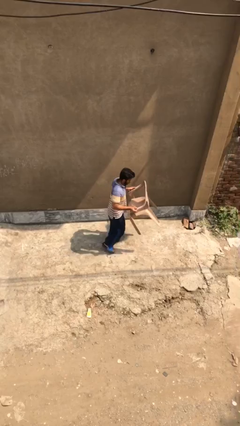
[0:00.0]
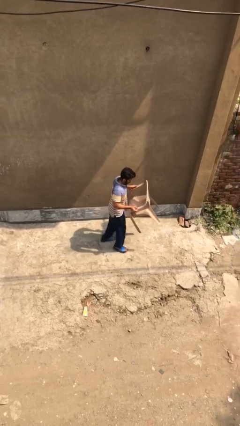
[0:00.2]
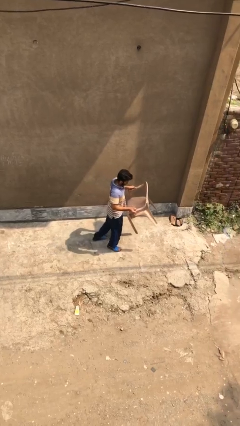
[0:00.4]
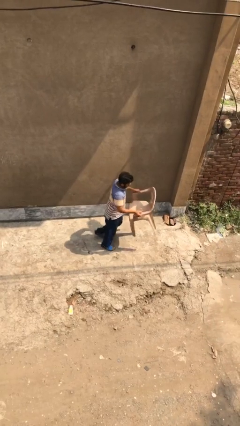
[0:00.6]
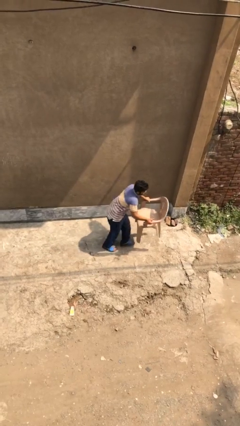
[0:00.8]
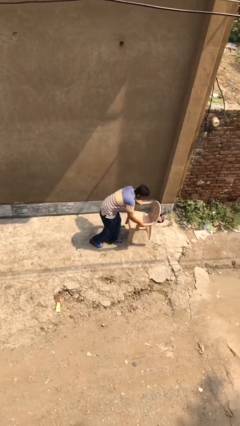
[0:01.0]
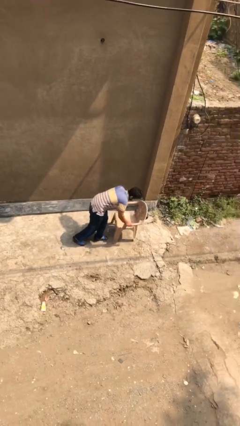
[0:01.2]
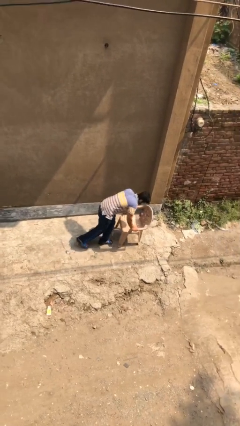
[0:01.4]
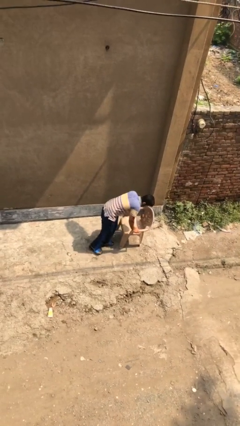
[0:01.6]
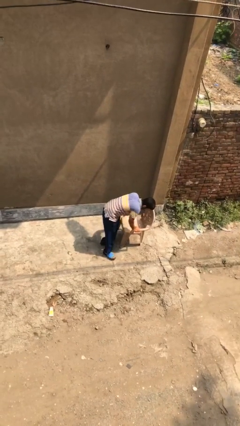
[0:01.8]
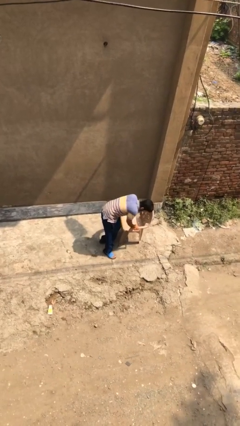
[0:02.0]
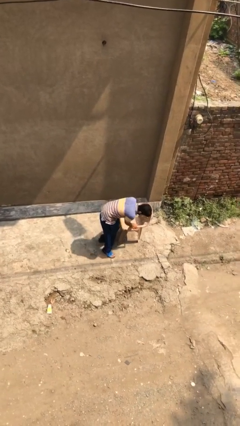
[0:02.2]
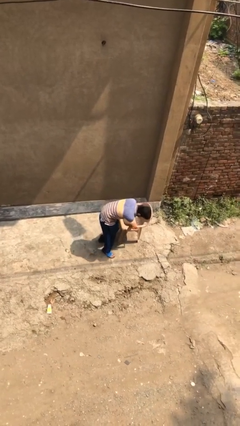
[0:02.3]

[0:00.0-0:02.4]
person puts down object on floor

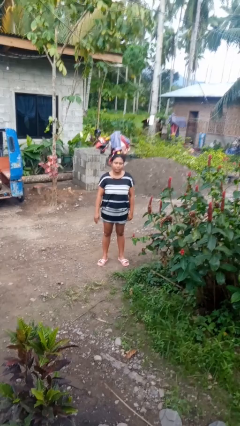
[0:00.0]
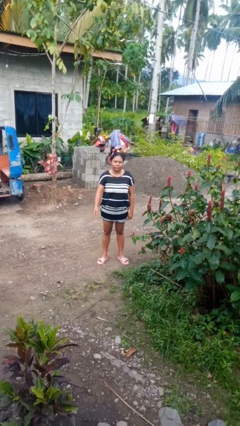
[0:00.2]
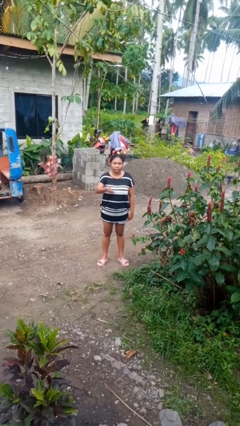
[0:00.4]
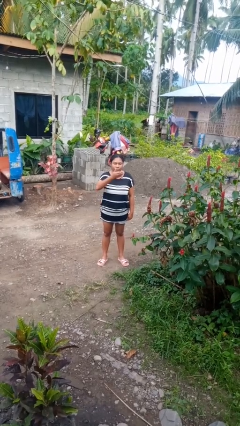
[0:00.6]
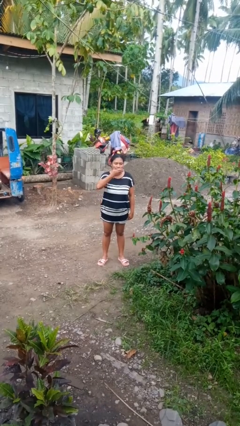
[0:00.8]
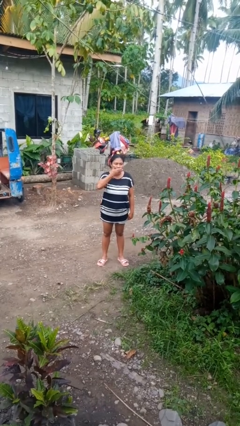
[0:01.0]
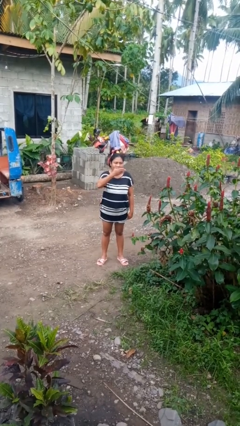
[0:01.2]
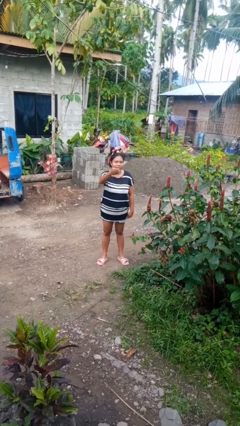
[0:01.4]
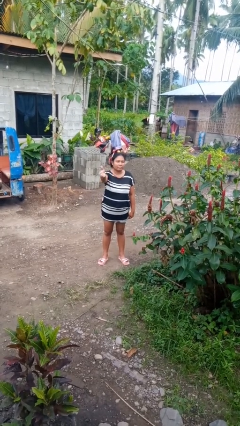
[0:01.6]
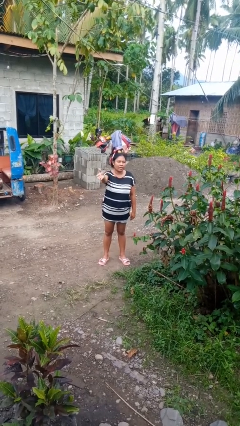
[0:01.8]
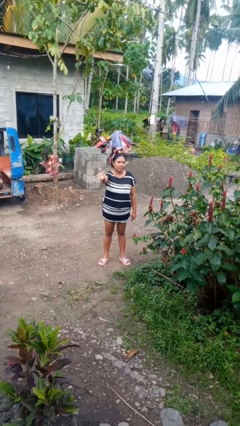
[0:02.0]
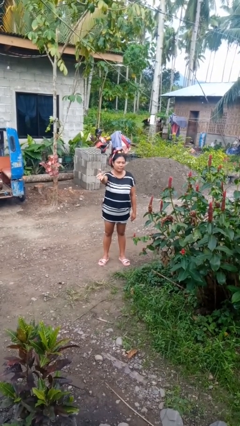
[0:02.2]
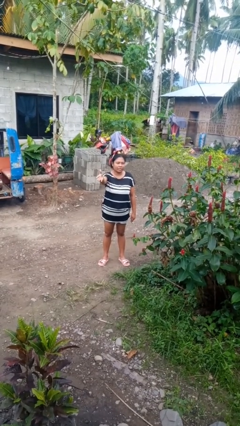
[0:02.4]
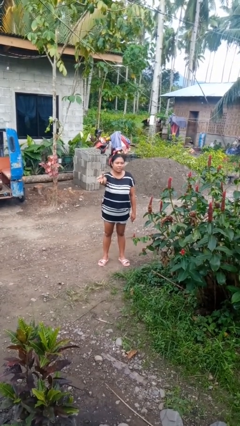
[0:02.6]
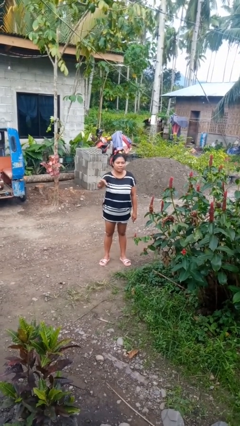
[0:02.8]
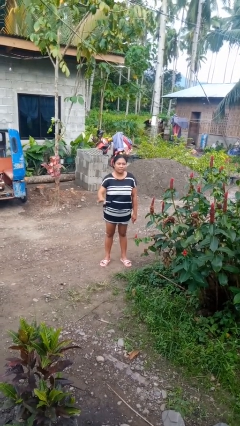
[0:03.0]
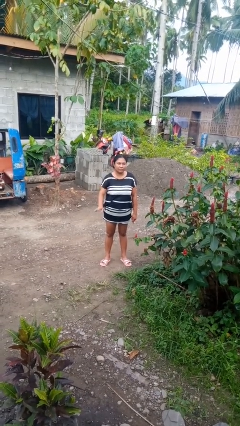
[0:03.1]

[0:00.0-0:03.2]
person gestures blow kiss

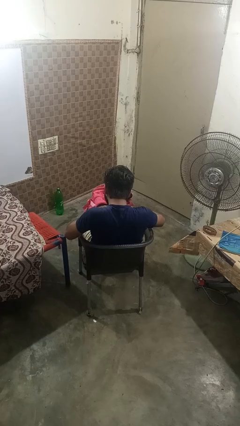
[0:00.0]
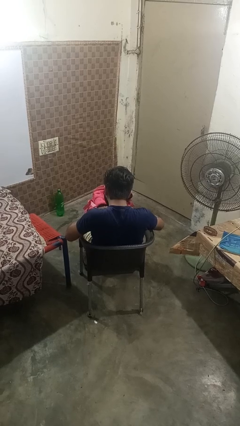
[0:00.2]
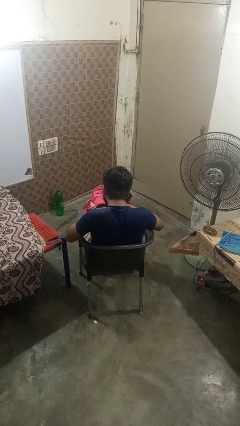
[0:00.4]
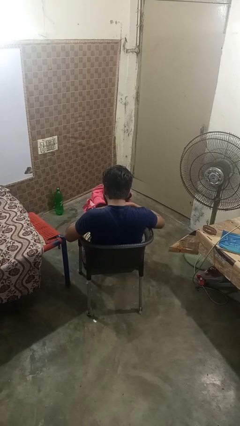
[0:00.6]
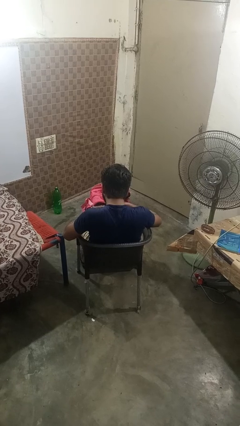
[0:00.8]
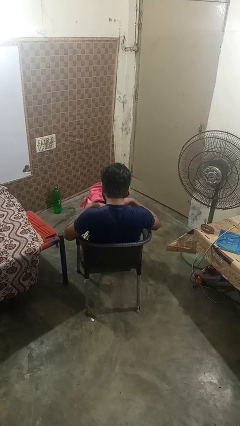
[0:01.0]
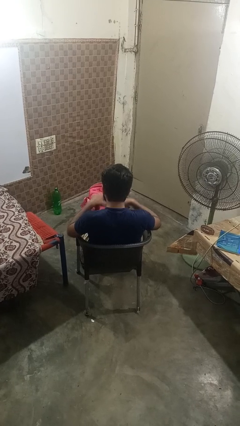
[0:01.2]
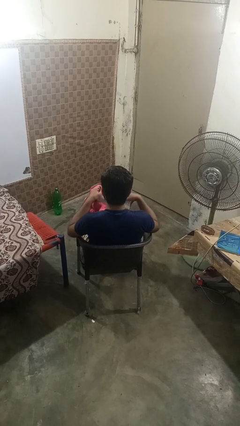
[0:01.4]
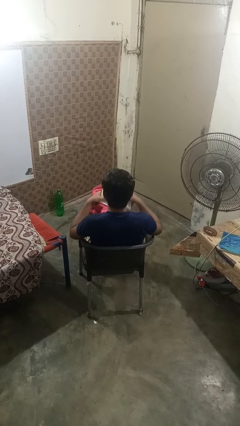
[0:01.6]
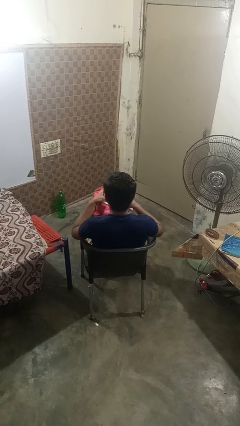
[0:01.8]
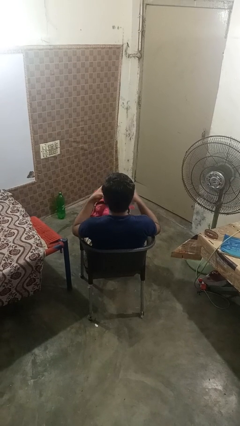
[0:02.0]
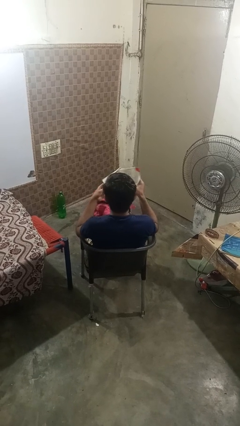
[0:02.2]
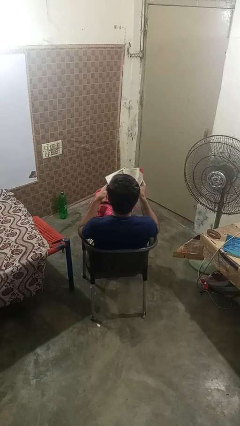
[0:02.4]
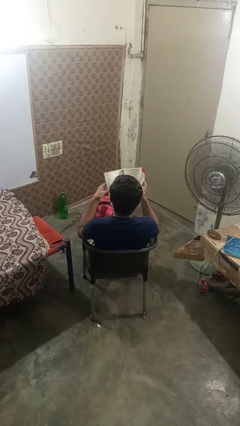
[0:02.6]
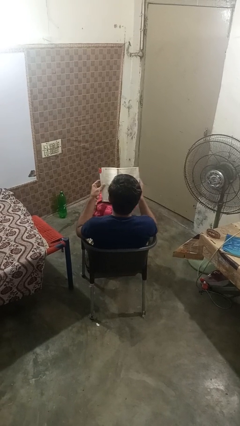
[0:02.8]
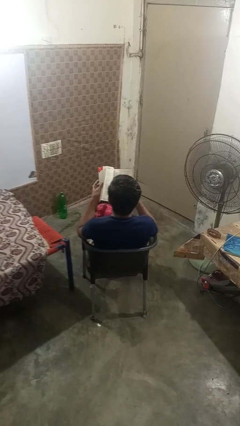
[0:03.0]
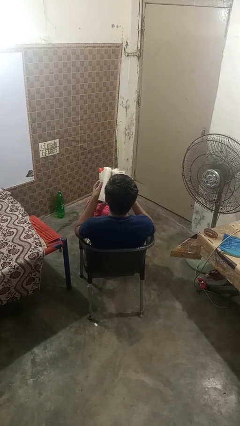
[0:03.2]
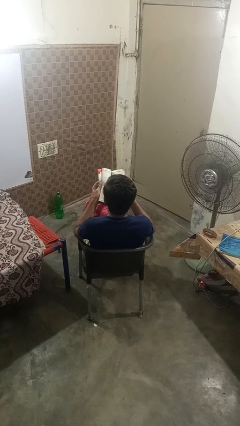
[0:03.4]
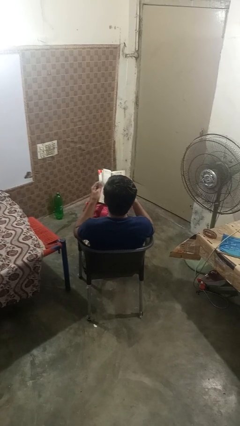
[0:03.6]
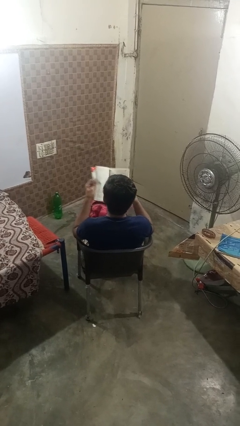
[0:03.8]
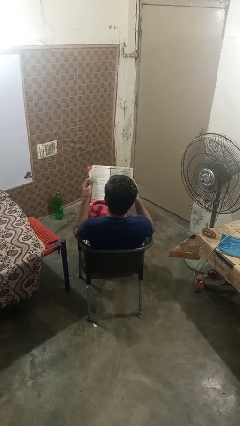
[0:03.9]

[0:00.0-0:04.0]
person takes object from backpack

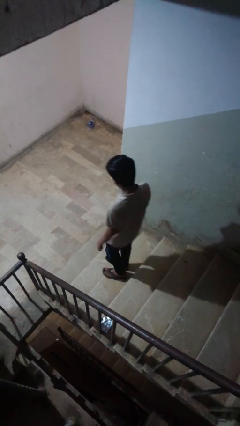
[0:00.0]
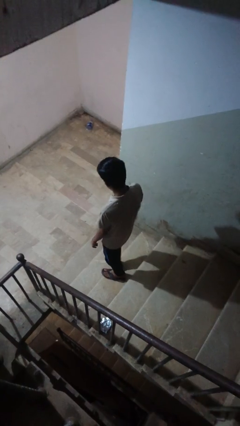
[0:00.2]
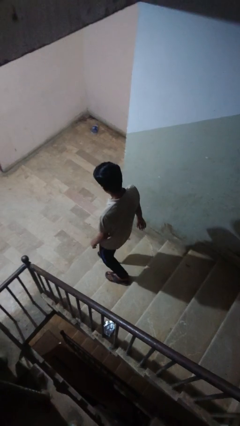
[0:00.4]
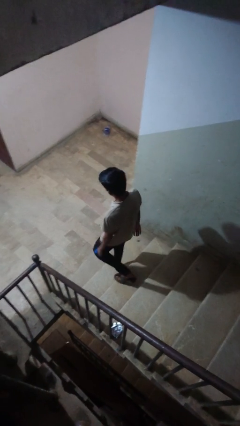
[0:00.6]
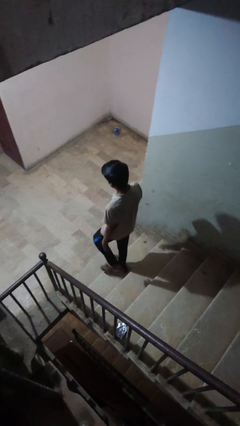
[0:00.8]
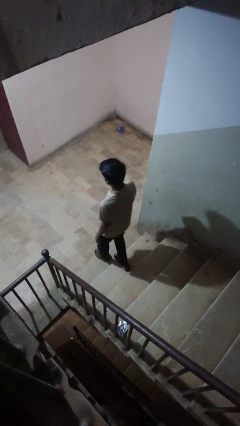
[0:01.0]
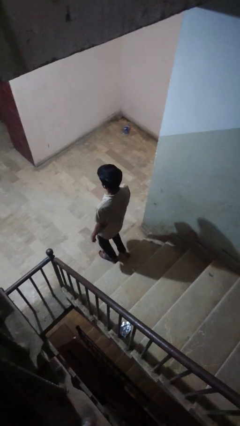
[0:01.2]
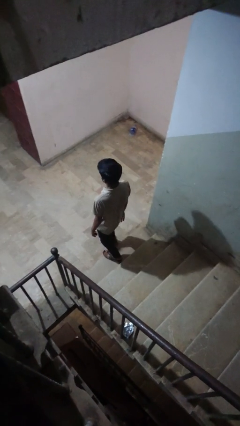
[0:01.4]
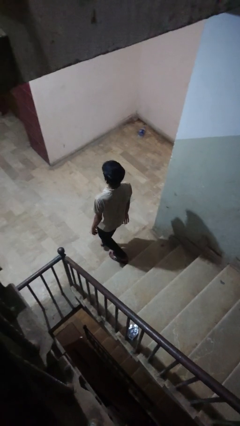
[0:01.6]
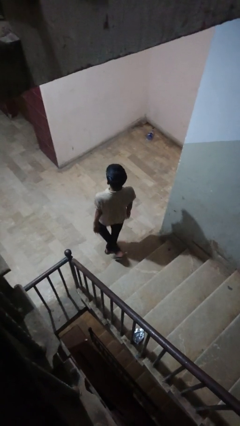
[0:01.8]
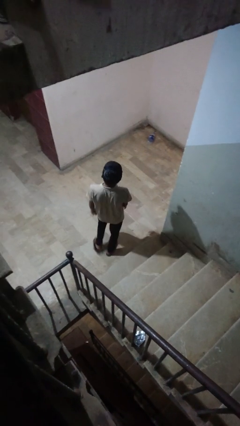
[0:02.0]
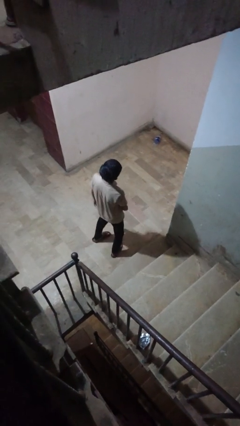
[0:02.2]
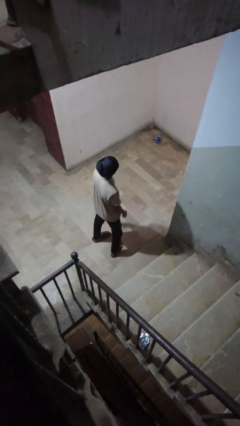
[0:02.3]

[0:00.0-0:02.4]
person climbs down stairs

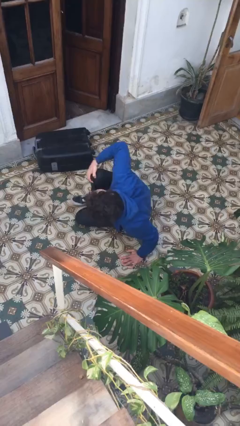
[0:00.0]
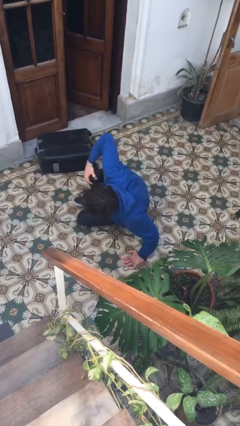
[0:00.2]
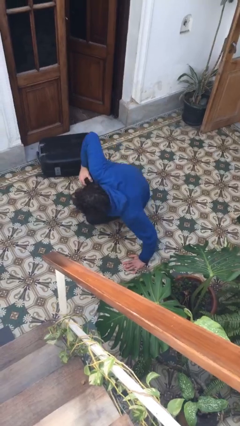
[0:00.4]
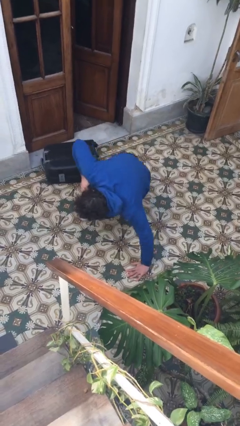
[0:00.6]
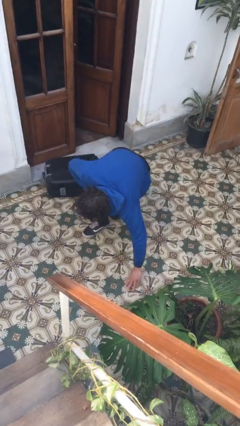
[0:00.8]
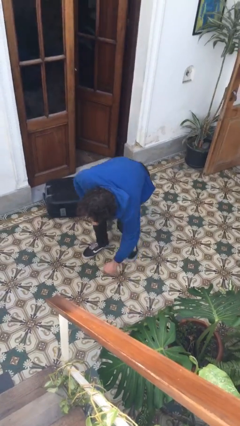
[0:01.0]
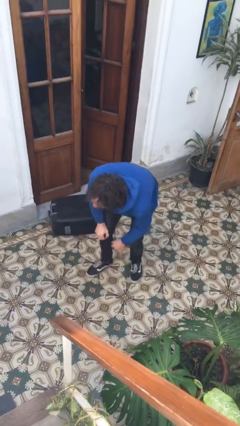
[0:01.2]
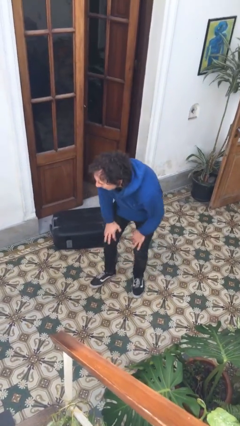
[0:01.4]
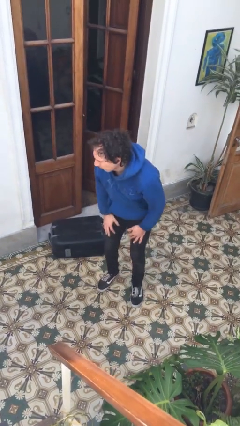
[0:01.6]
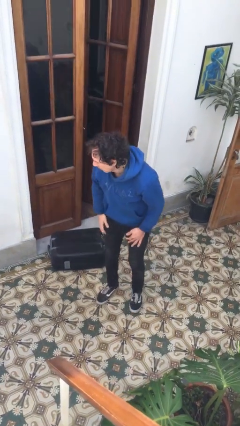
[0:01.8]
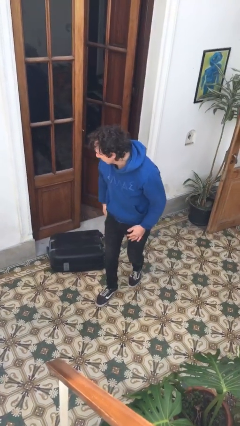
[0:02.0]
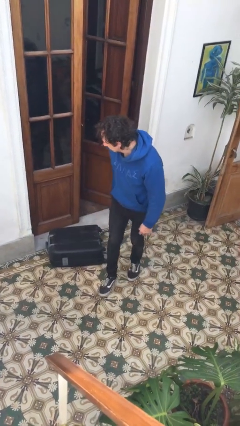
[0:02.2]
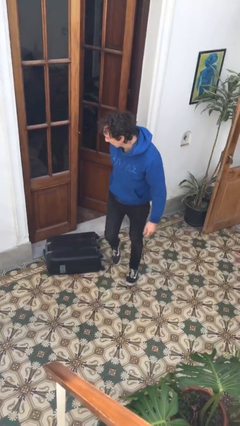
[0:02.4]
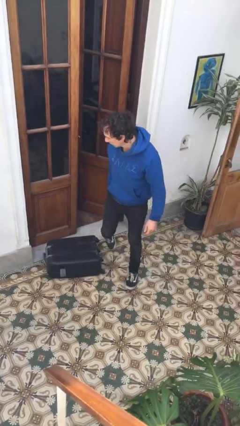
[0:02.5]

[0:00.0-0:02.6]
person stands up from floor

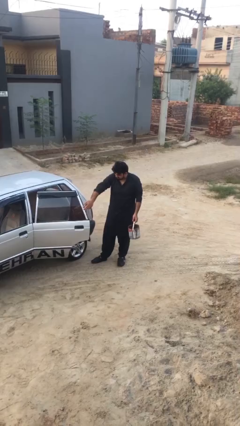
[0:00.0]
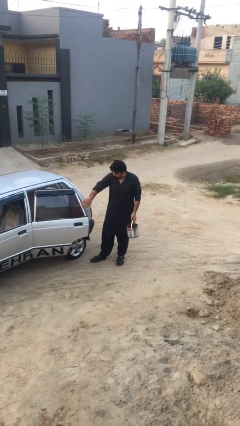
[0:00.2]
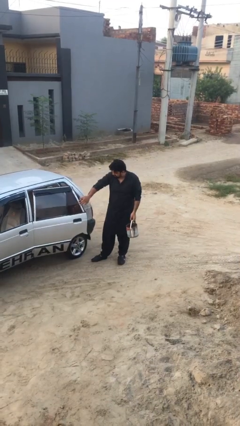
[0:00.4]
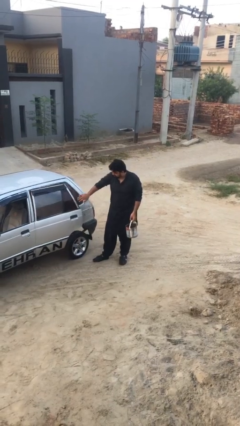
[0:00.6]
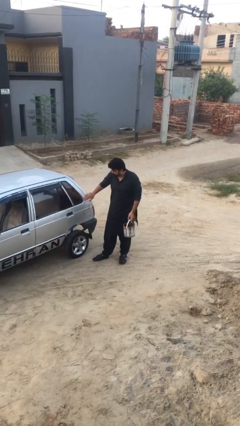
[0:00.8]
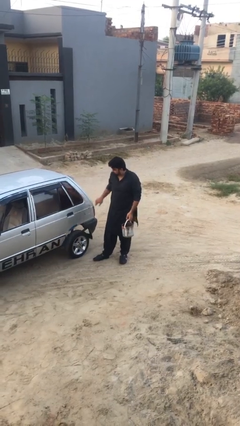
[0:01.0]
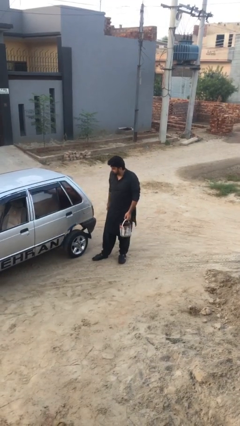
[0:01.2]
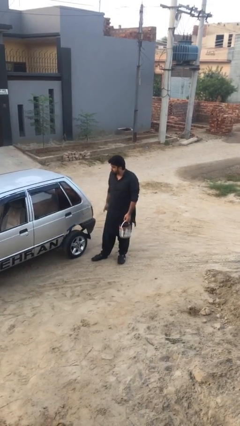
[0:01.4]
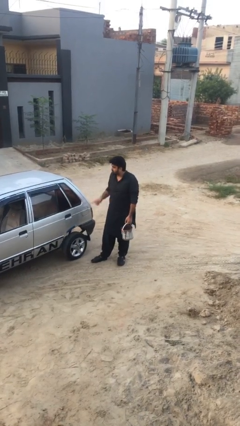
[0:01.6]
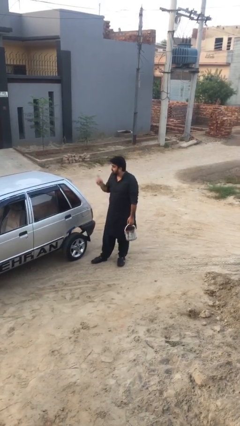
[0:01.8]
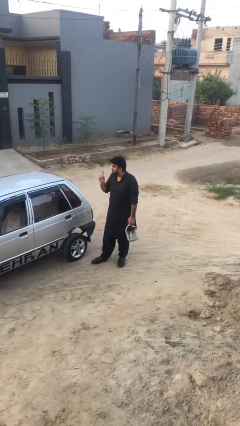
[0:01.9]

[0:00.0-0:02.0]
person closes car door

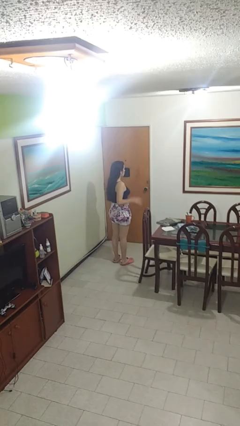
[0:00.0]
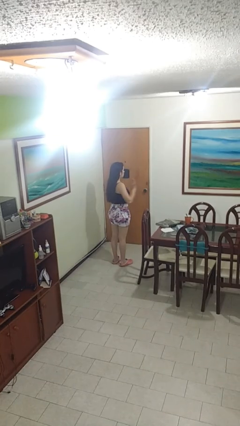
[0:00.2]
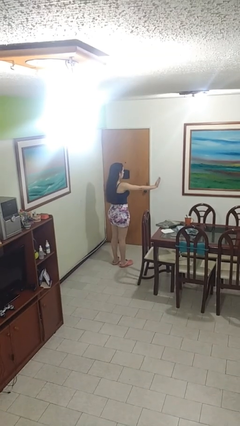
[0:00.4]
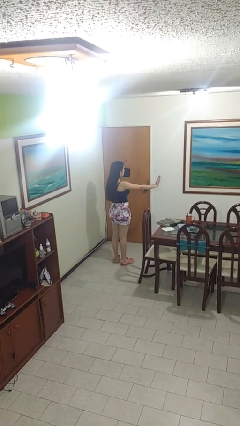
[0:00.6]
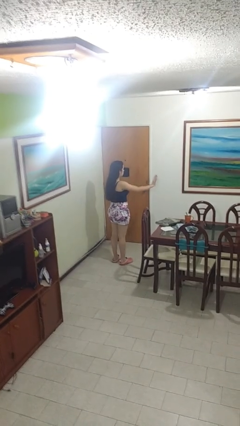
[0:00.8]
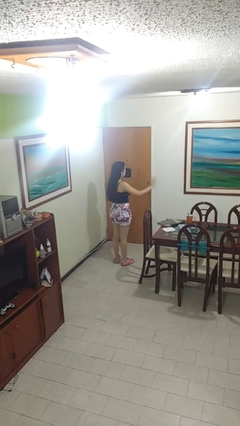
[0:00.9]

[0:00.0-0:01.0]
person gestures stop
